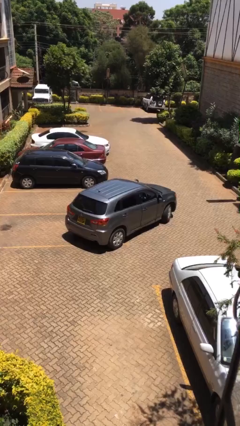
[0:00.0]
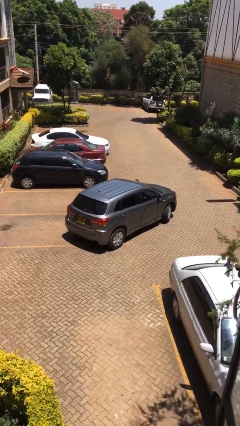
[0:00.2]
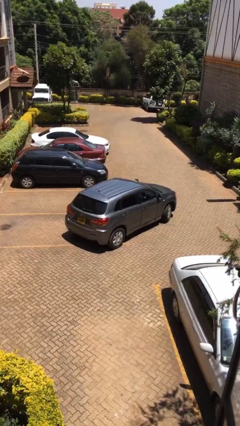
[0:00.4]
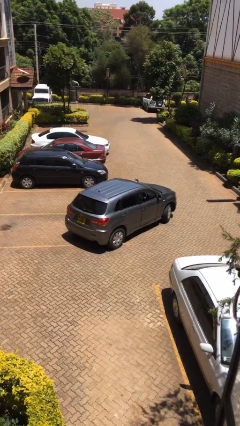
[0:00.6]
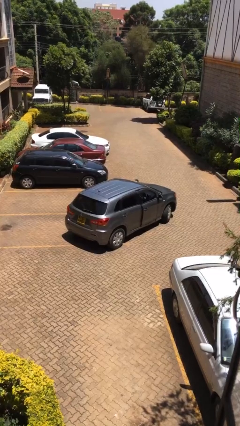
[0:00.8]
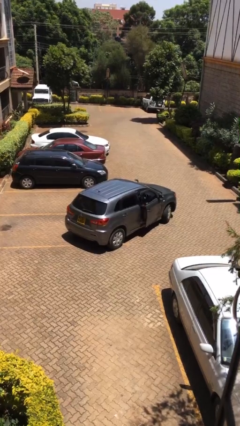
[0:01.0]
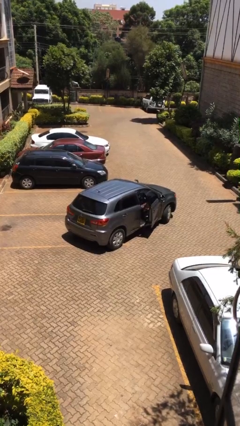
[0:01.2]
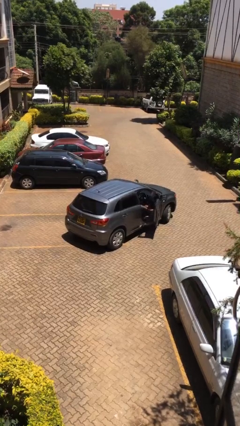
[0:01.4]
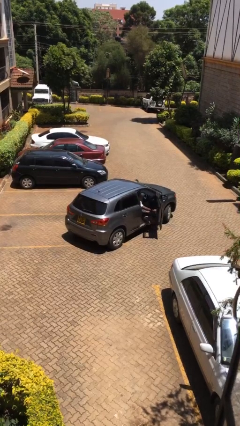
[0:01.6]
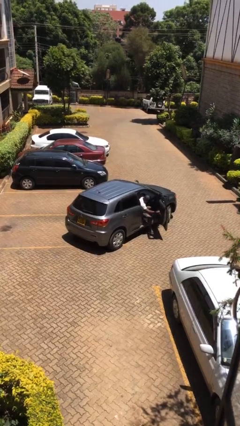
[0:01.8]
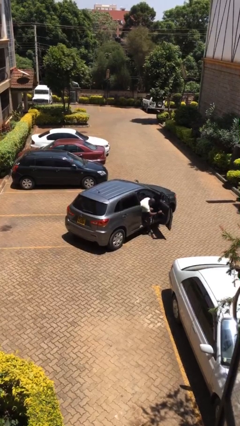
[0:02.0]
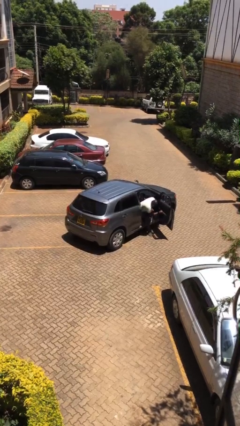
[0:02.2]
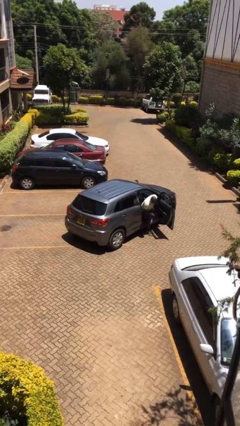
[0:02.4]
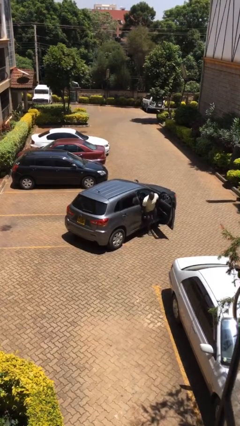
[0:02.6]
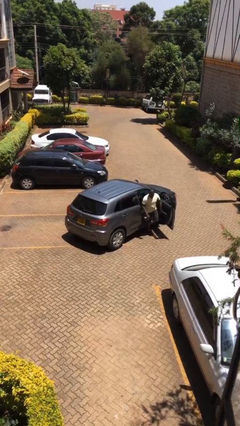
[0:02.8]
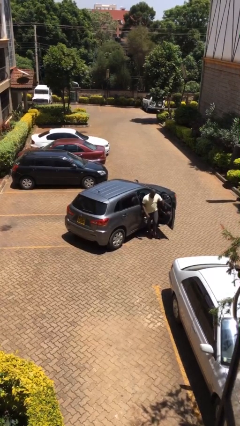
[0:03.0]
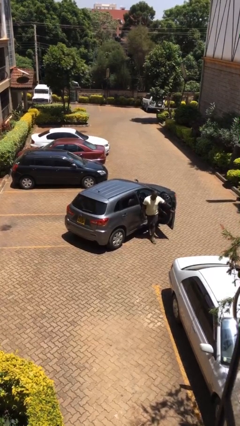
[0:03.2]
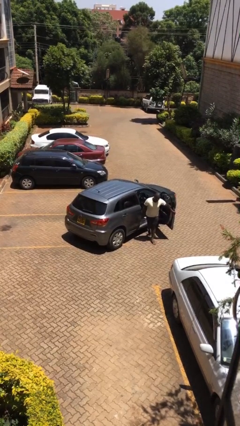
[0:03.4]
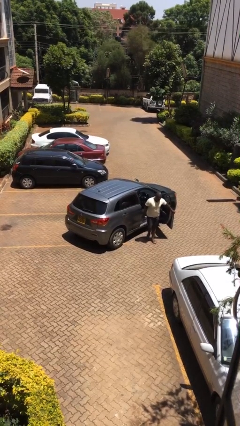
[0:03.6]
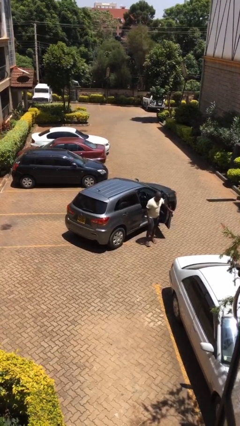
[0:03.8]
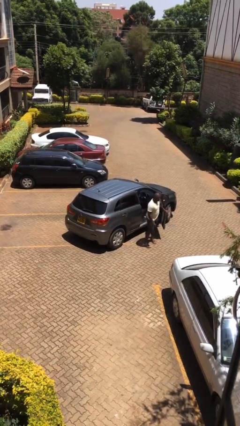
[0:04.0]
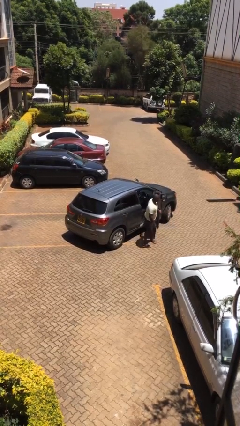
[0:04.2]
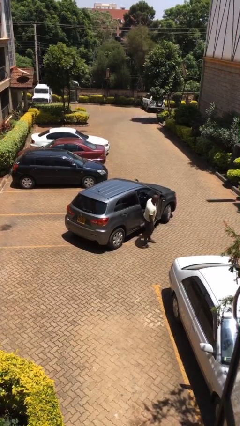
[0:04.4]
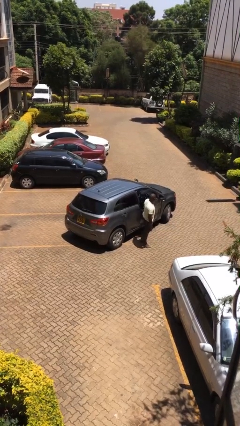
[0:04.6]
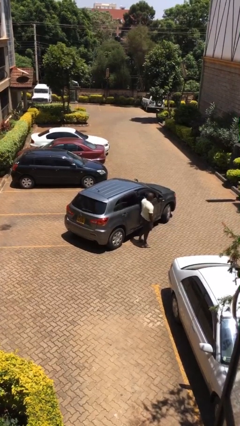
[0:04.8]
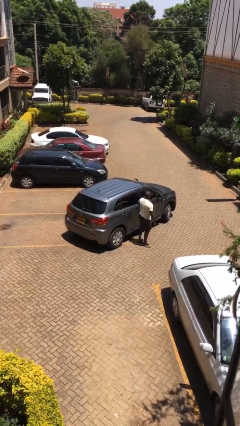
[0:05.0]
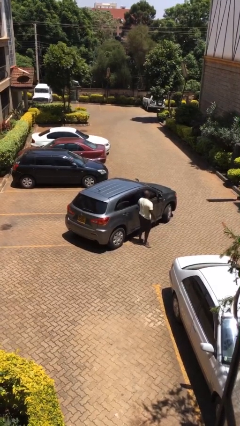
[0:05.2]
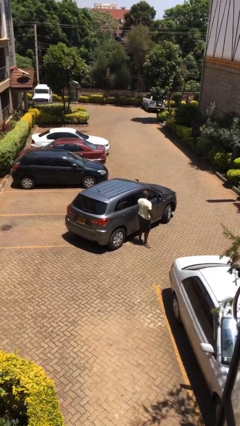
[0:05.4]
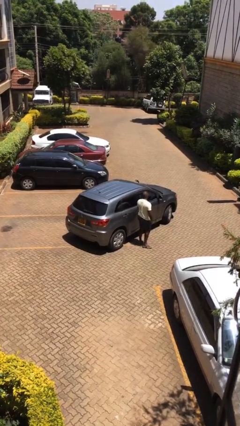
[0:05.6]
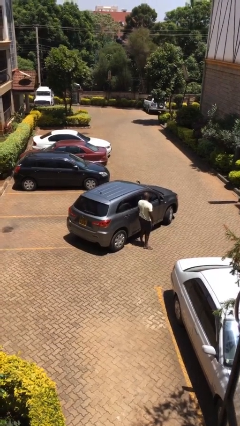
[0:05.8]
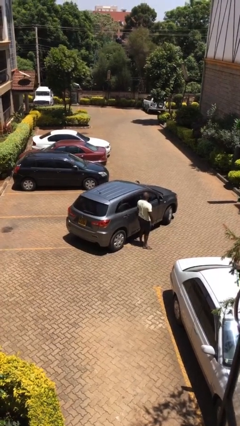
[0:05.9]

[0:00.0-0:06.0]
car drops off person

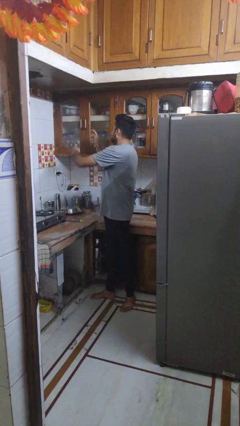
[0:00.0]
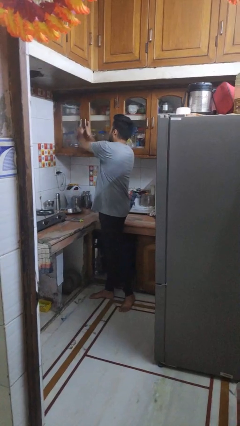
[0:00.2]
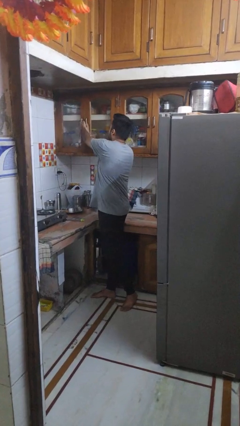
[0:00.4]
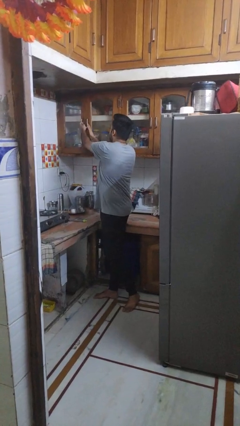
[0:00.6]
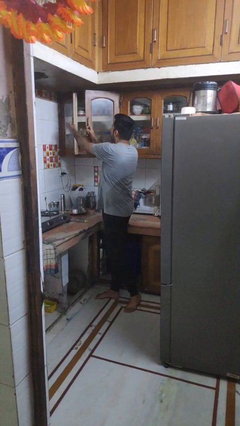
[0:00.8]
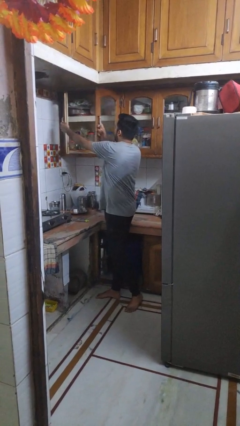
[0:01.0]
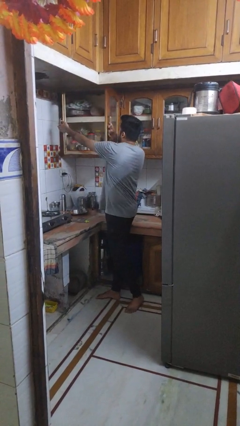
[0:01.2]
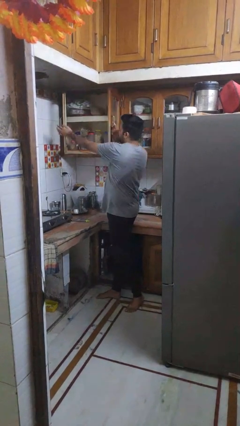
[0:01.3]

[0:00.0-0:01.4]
person opens cabinet

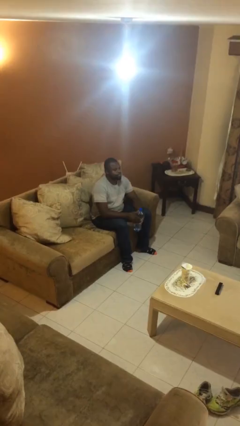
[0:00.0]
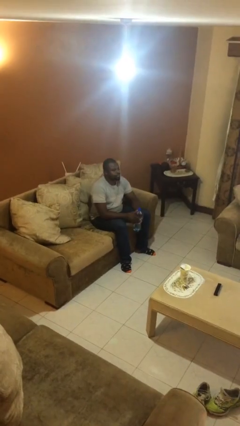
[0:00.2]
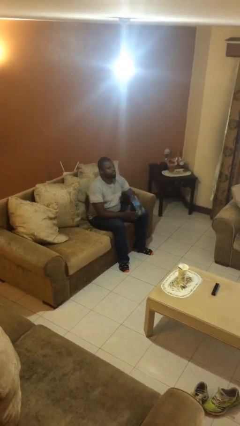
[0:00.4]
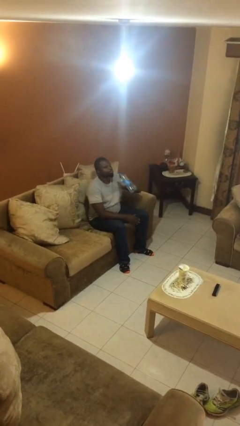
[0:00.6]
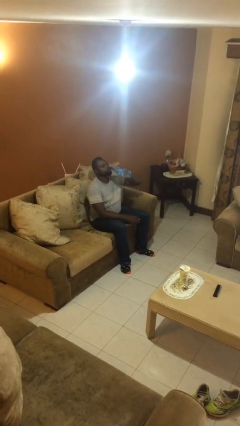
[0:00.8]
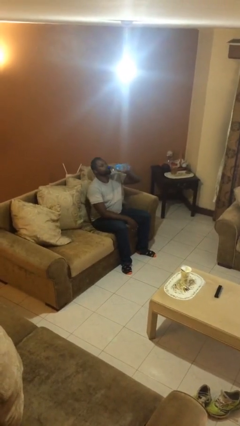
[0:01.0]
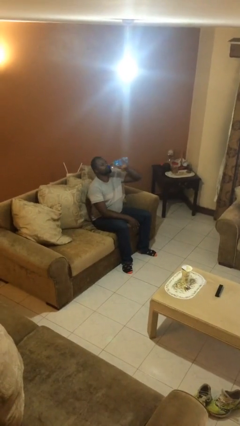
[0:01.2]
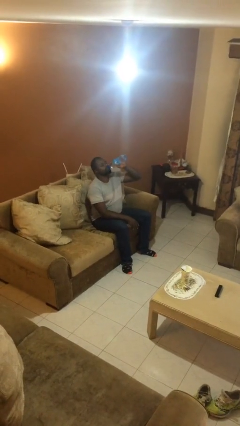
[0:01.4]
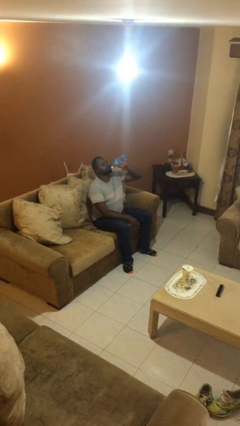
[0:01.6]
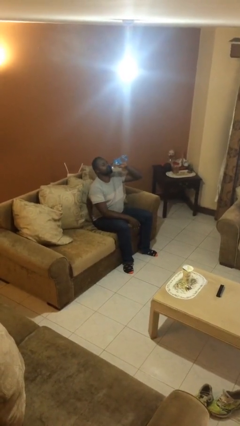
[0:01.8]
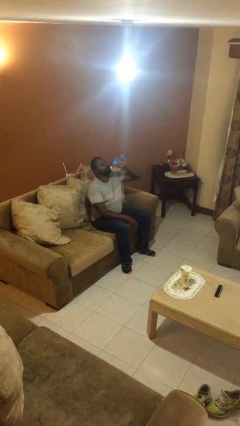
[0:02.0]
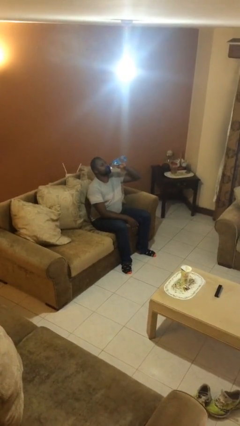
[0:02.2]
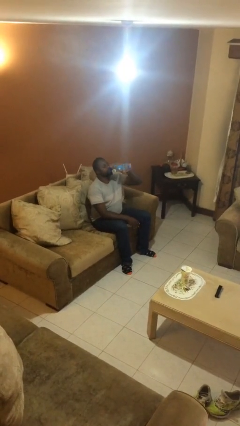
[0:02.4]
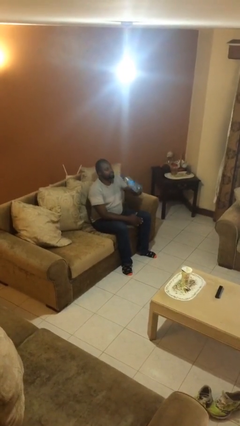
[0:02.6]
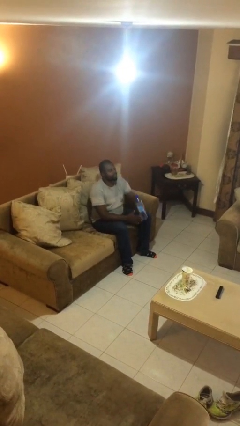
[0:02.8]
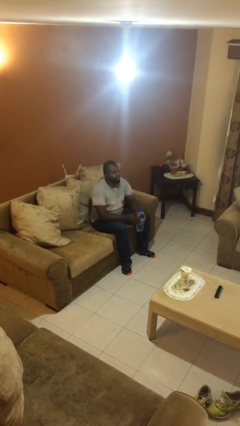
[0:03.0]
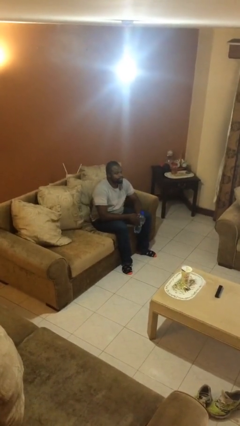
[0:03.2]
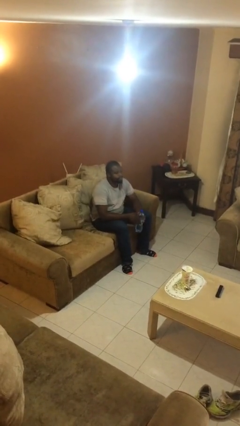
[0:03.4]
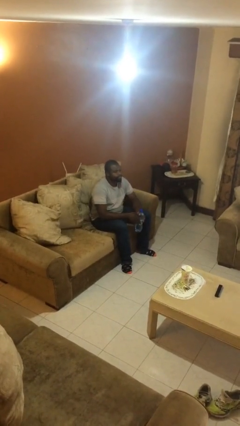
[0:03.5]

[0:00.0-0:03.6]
person drinks from bottle

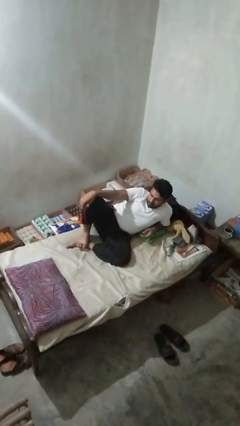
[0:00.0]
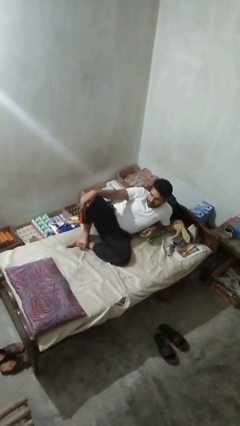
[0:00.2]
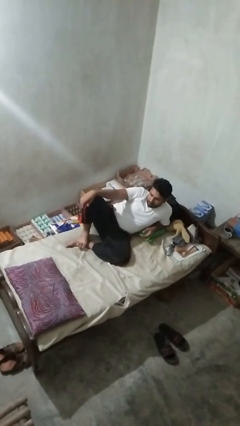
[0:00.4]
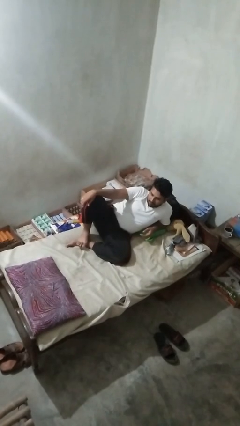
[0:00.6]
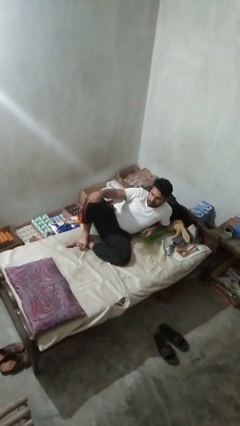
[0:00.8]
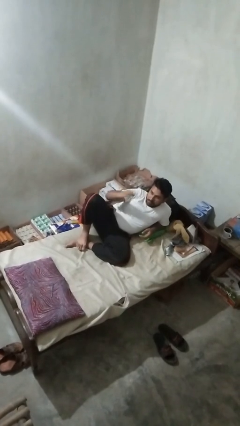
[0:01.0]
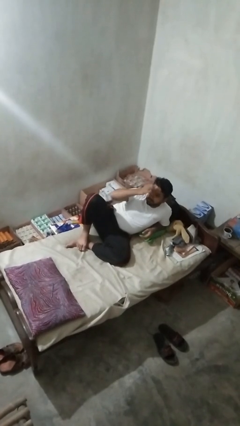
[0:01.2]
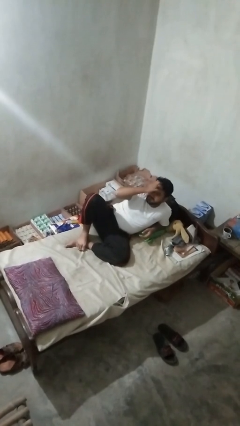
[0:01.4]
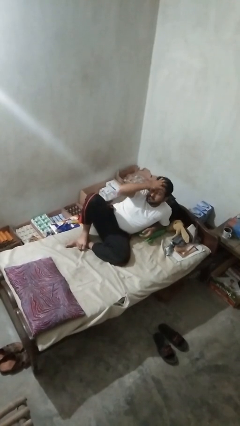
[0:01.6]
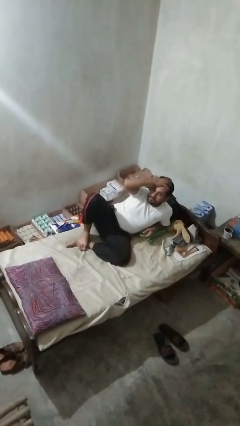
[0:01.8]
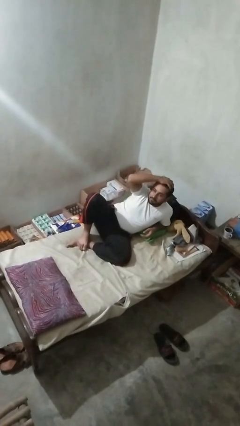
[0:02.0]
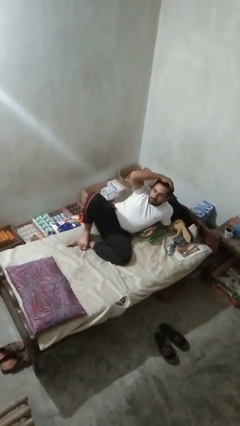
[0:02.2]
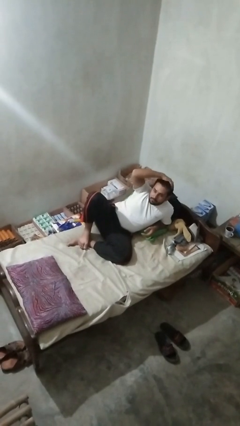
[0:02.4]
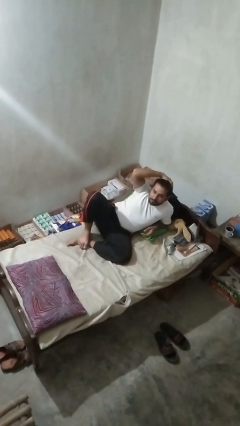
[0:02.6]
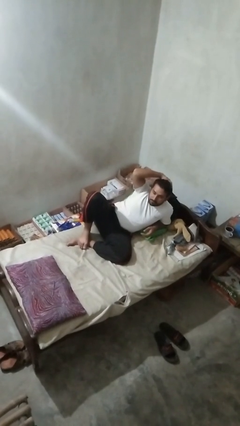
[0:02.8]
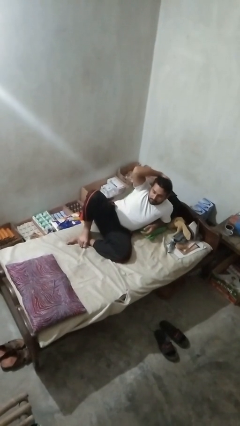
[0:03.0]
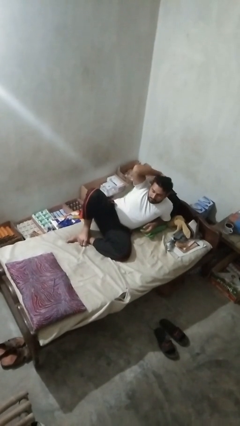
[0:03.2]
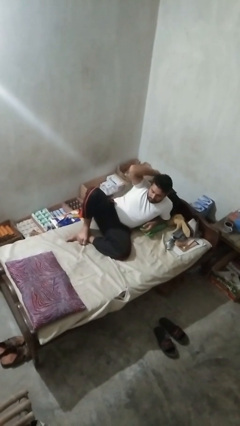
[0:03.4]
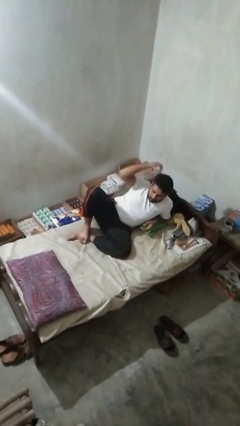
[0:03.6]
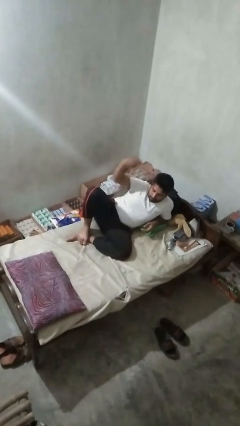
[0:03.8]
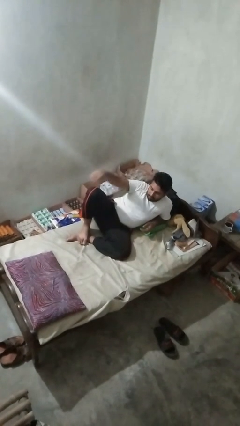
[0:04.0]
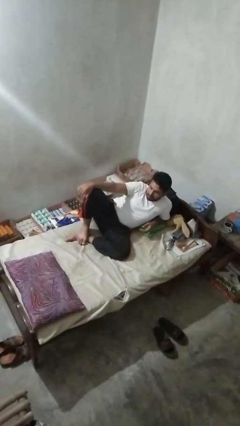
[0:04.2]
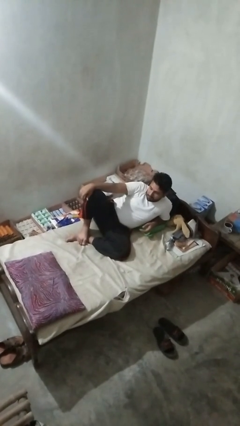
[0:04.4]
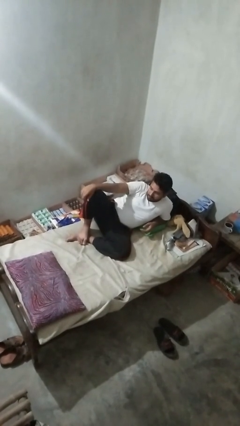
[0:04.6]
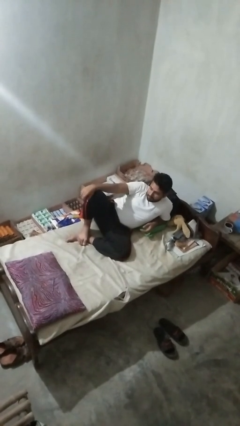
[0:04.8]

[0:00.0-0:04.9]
person strokes hair

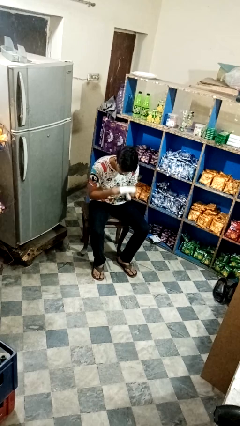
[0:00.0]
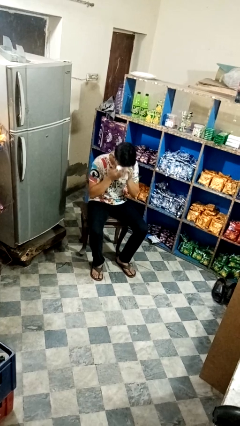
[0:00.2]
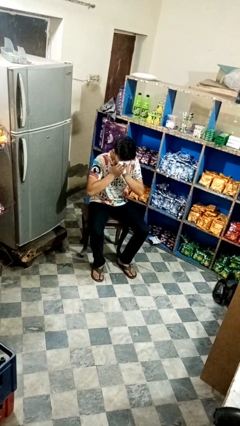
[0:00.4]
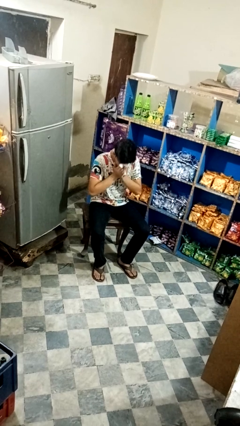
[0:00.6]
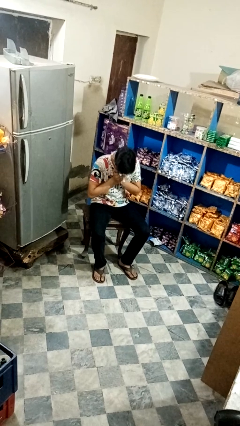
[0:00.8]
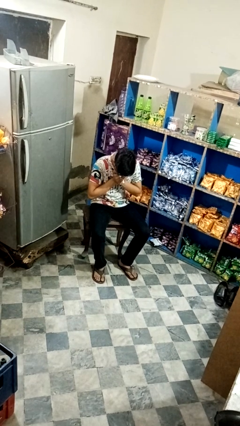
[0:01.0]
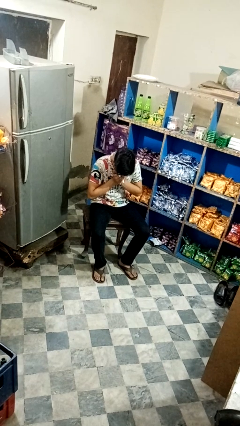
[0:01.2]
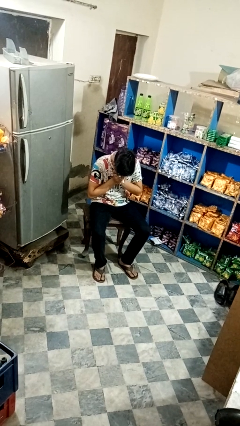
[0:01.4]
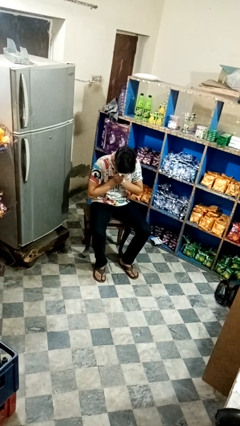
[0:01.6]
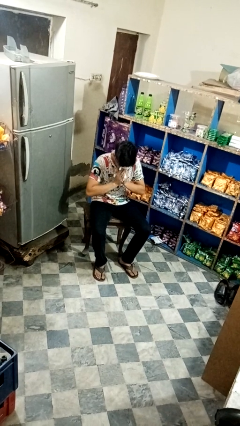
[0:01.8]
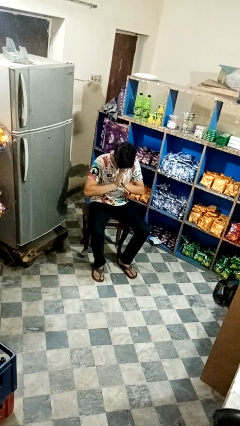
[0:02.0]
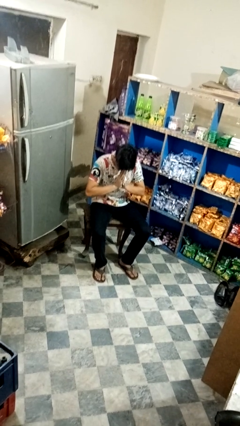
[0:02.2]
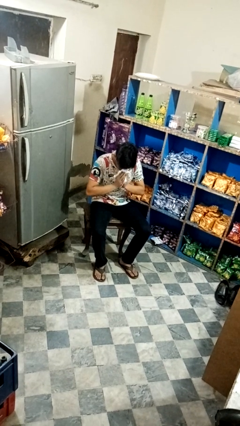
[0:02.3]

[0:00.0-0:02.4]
person blows nose
